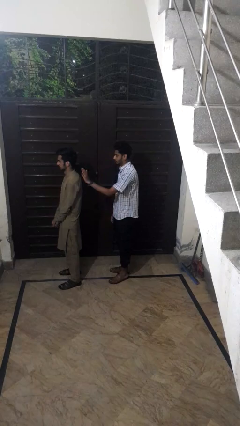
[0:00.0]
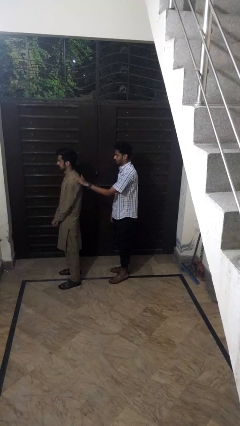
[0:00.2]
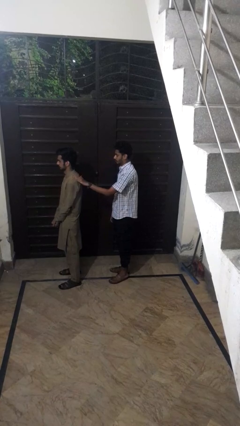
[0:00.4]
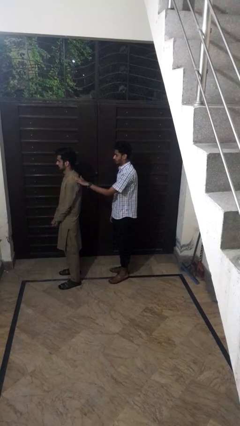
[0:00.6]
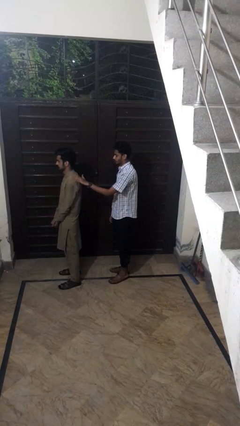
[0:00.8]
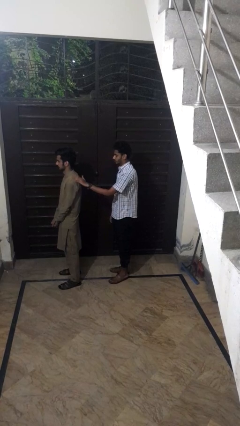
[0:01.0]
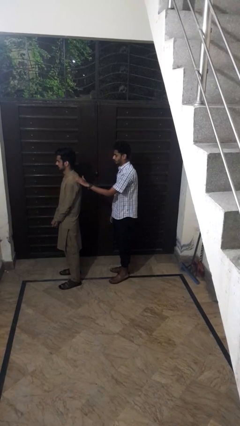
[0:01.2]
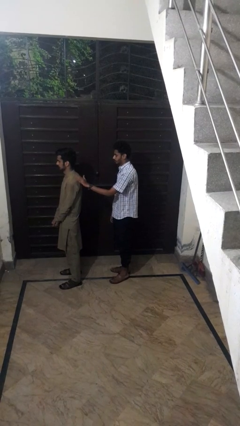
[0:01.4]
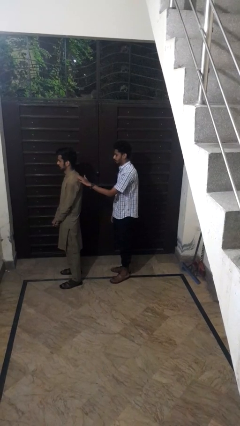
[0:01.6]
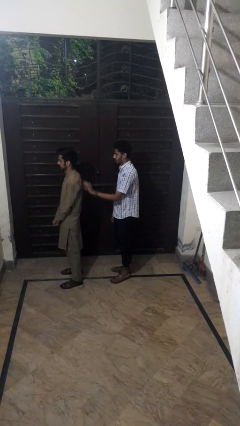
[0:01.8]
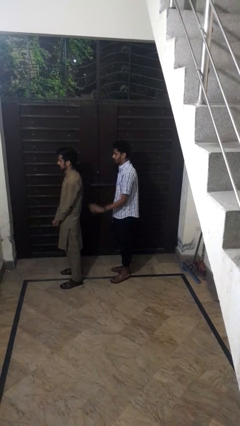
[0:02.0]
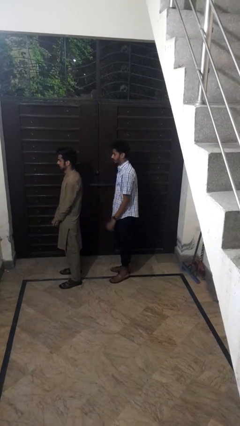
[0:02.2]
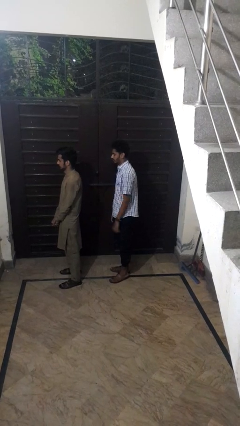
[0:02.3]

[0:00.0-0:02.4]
person touches back of person

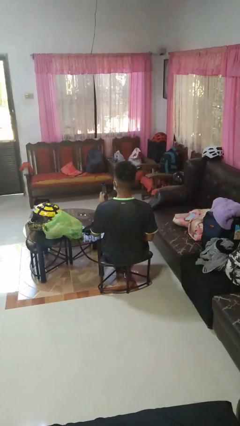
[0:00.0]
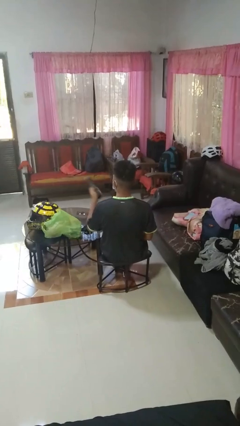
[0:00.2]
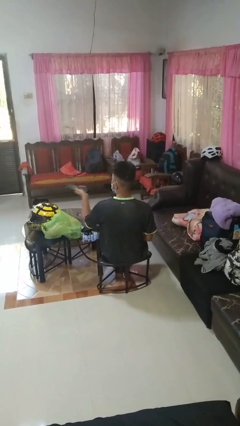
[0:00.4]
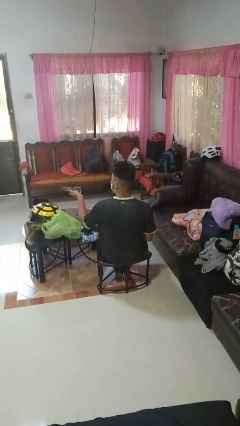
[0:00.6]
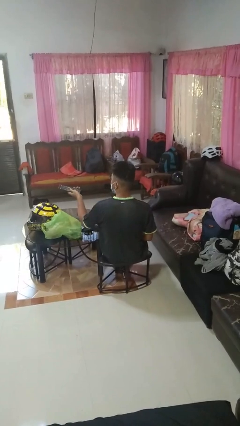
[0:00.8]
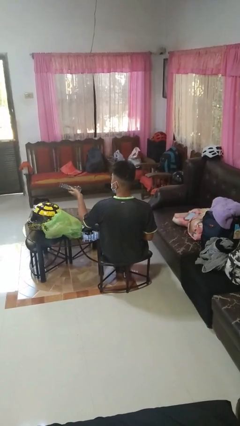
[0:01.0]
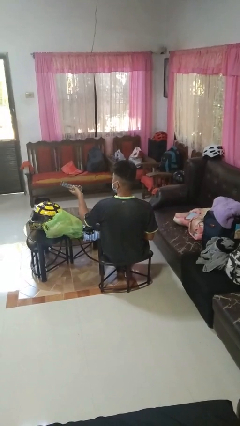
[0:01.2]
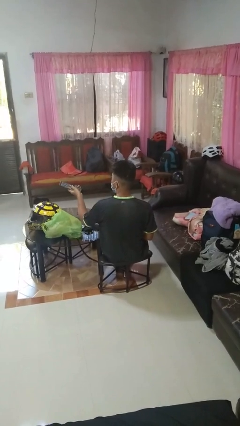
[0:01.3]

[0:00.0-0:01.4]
person uses television remote

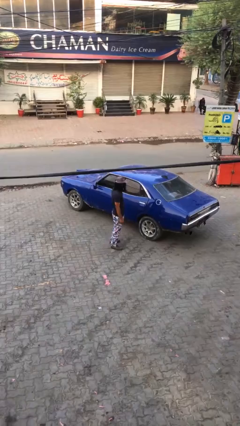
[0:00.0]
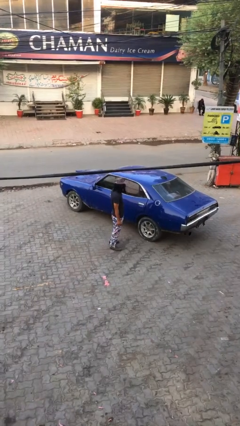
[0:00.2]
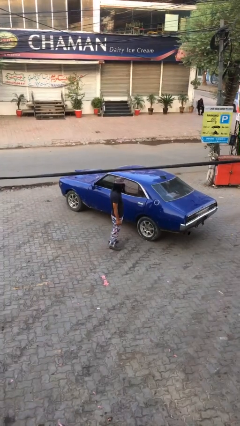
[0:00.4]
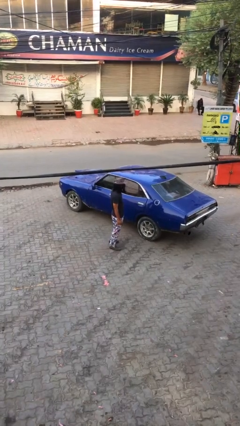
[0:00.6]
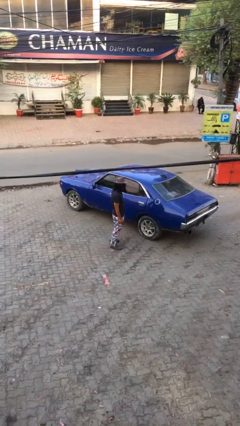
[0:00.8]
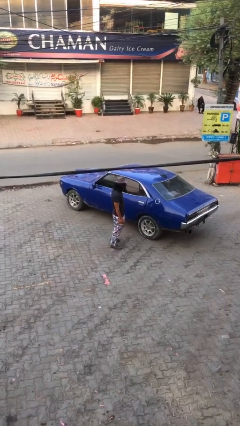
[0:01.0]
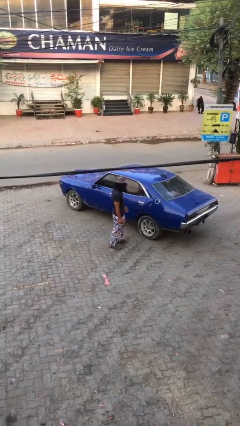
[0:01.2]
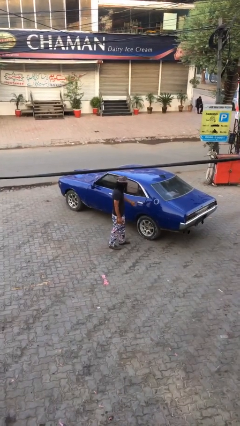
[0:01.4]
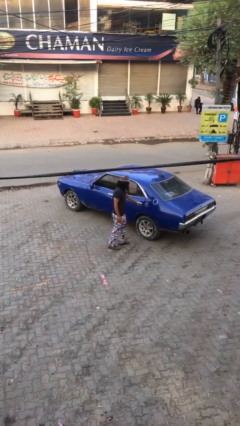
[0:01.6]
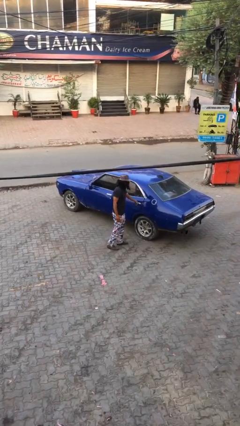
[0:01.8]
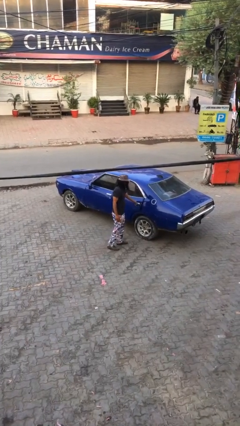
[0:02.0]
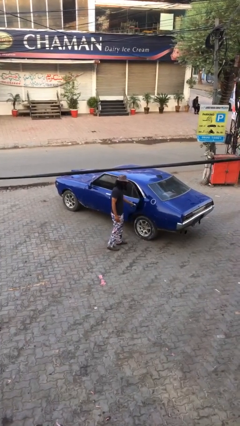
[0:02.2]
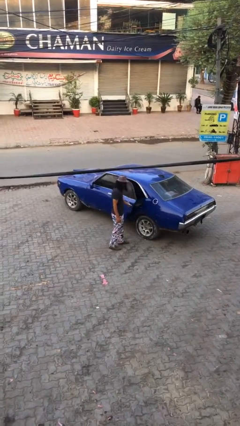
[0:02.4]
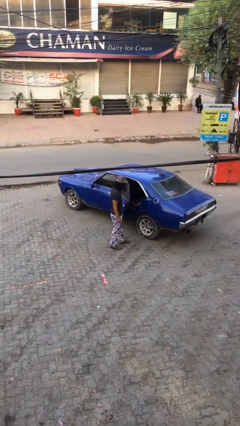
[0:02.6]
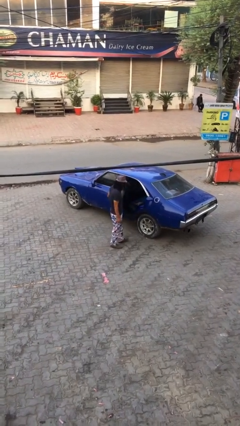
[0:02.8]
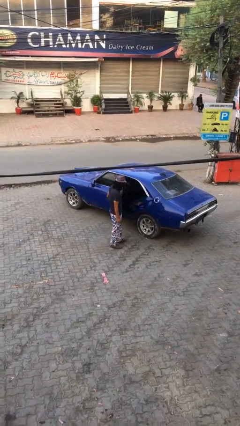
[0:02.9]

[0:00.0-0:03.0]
person opens car door

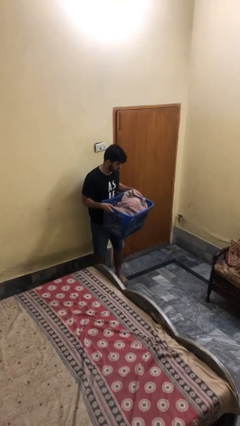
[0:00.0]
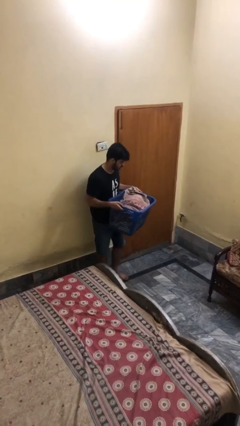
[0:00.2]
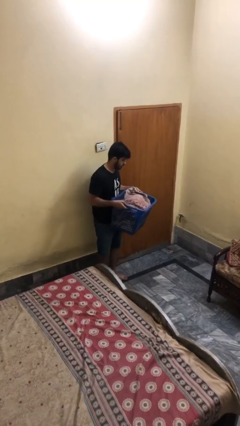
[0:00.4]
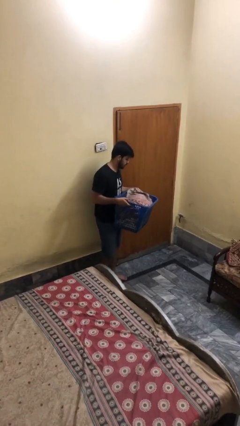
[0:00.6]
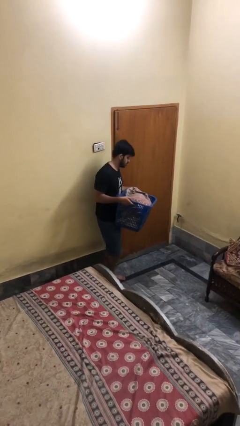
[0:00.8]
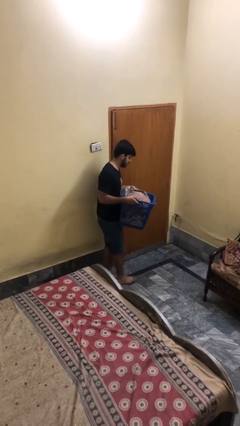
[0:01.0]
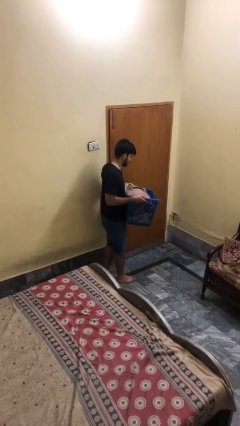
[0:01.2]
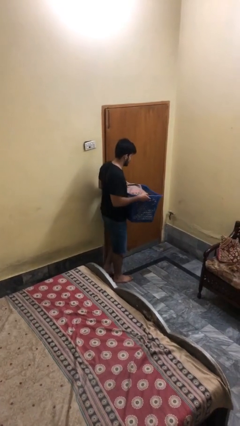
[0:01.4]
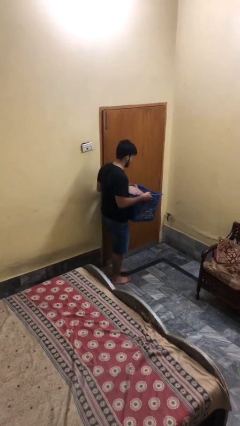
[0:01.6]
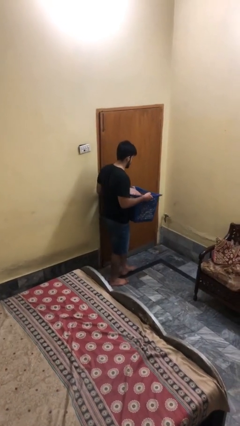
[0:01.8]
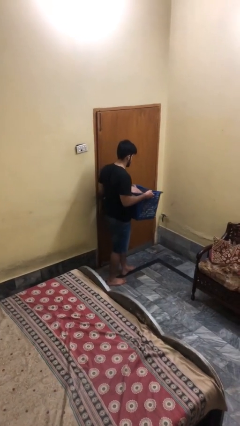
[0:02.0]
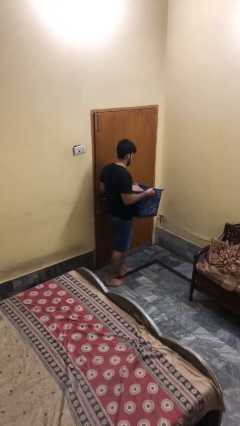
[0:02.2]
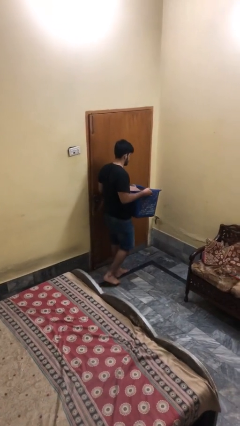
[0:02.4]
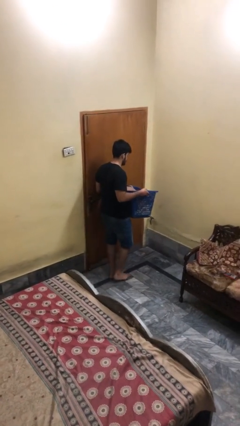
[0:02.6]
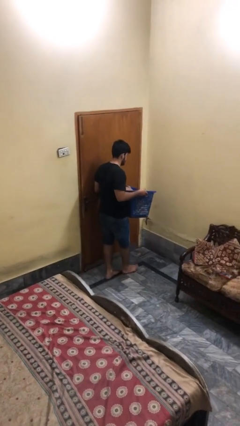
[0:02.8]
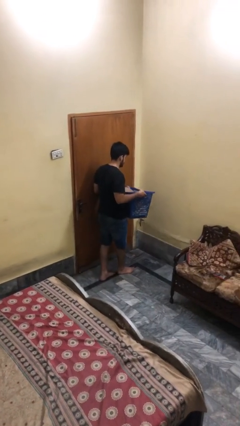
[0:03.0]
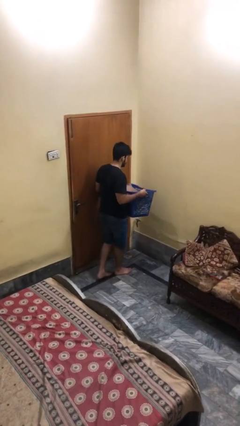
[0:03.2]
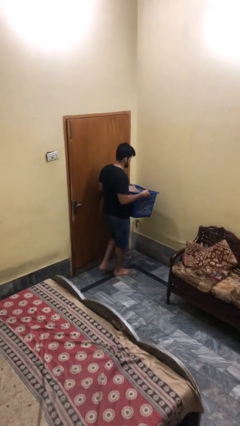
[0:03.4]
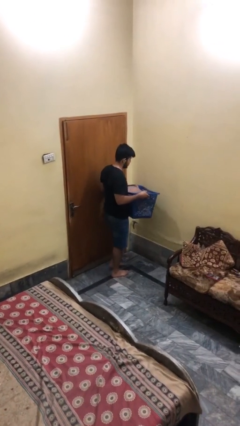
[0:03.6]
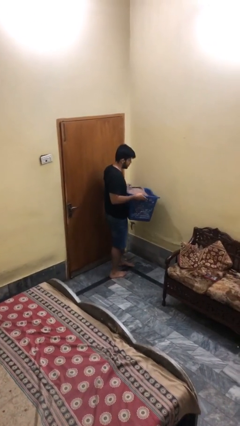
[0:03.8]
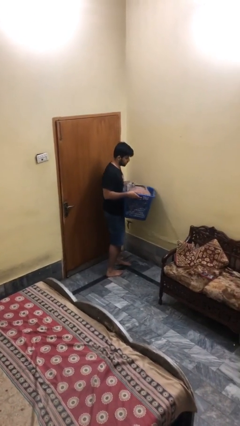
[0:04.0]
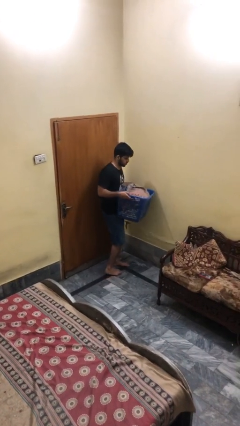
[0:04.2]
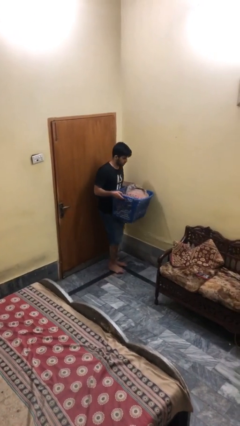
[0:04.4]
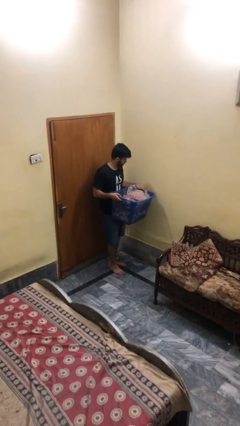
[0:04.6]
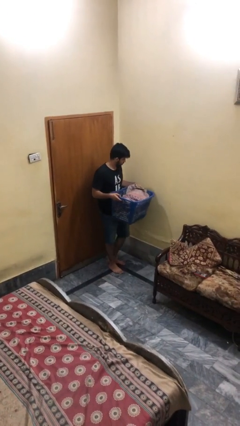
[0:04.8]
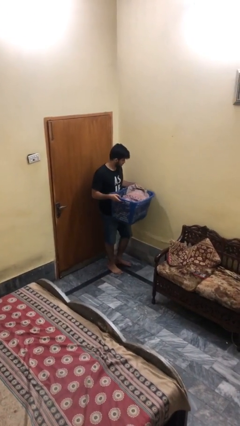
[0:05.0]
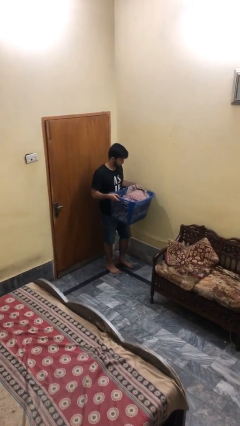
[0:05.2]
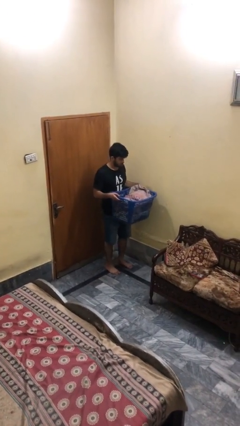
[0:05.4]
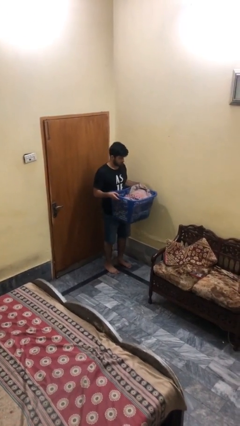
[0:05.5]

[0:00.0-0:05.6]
person carries laundry basket

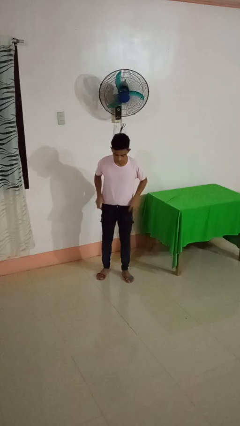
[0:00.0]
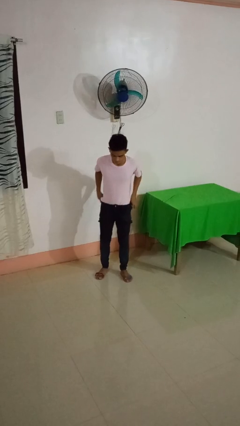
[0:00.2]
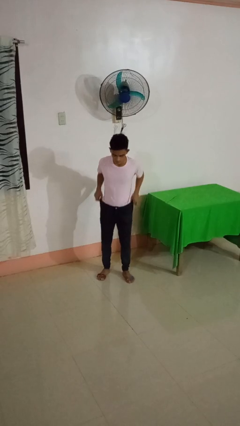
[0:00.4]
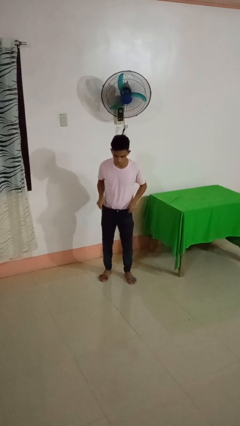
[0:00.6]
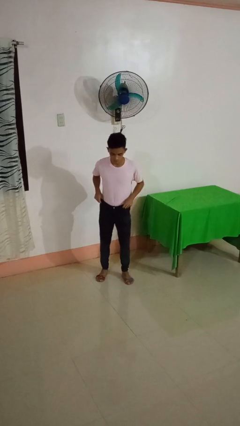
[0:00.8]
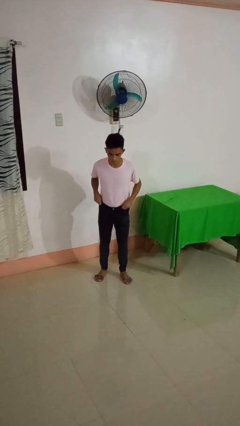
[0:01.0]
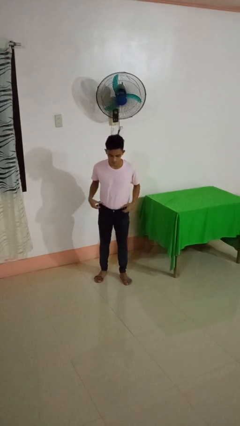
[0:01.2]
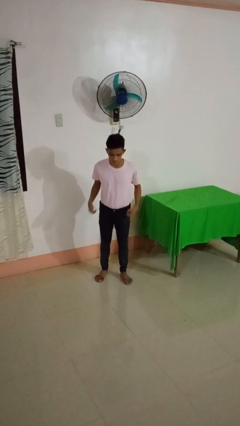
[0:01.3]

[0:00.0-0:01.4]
person hikes up pants

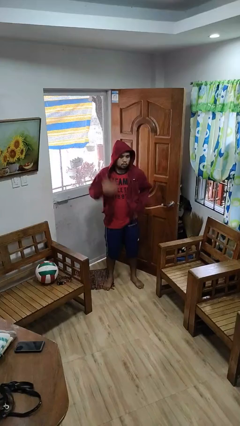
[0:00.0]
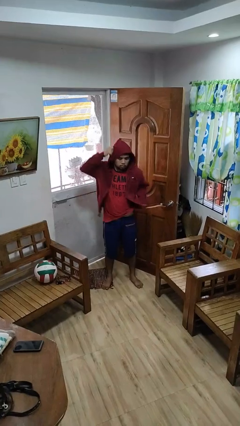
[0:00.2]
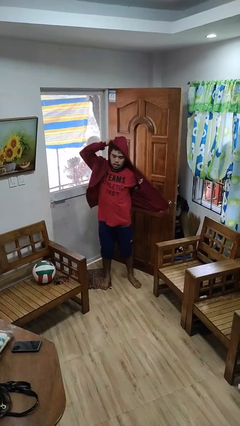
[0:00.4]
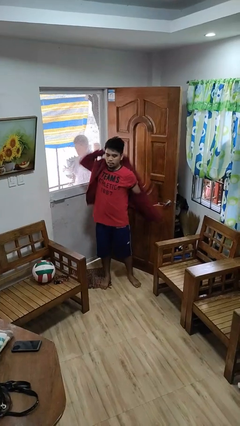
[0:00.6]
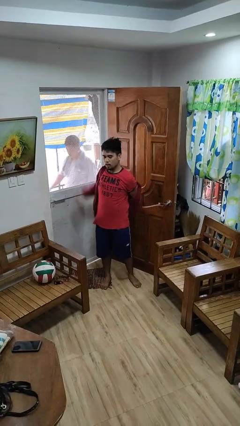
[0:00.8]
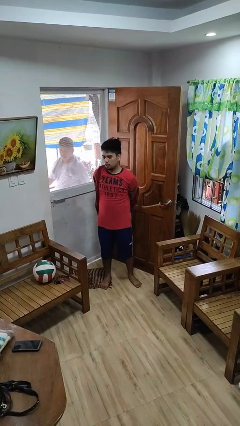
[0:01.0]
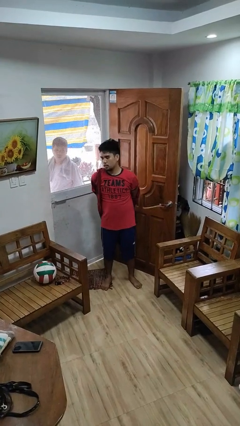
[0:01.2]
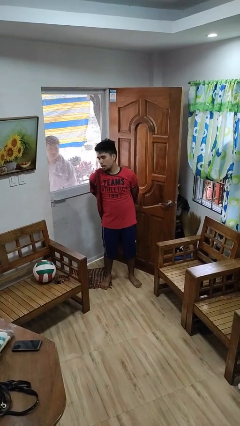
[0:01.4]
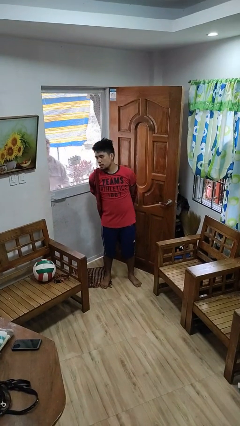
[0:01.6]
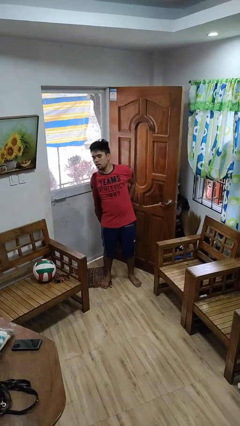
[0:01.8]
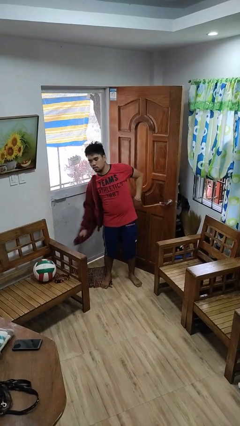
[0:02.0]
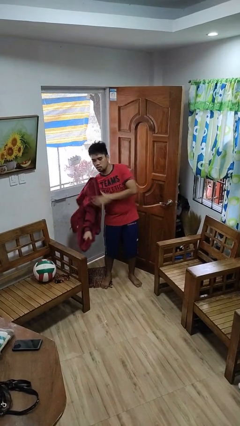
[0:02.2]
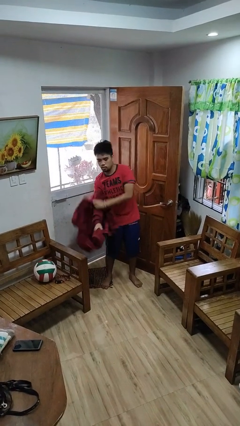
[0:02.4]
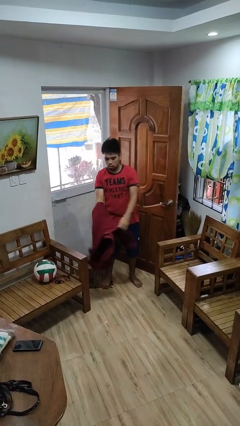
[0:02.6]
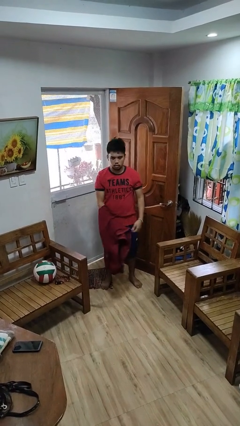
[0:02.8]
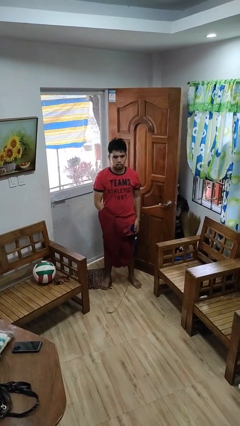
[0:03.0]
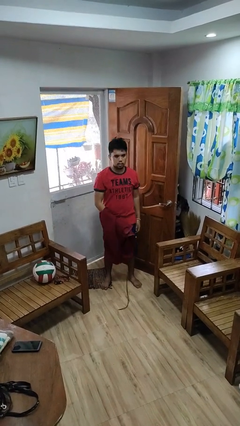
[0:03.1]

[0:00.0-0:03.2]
person takes off hoodie

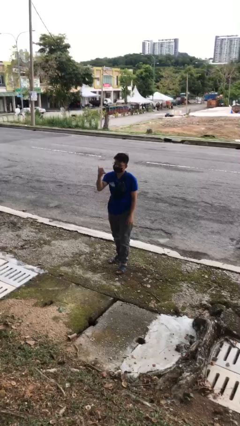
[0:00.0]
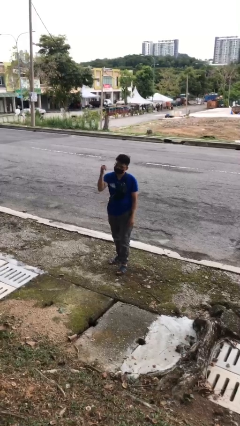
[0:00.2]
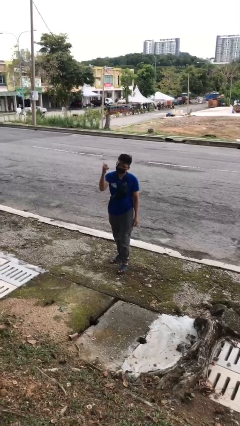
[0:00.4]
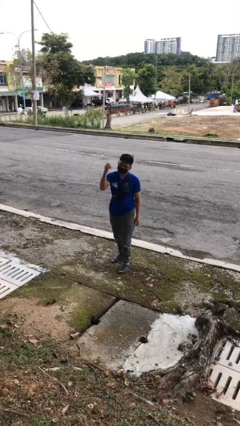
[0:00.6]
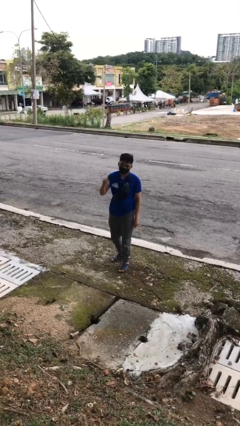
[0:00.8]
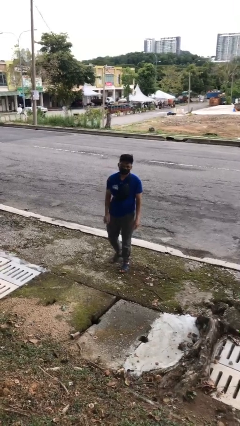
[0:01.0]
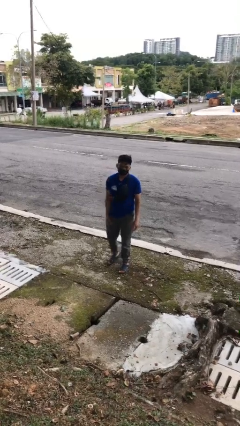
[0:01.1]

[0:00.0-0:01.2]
person gestures hang loose
